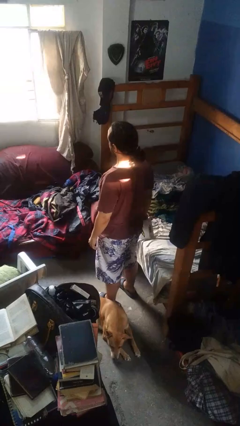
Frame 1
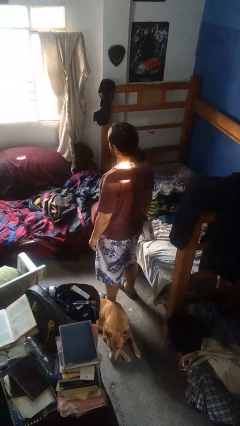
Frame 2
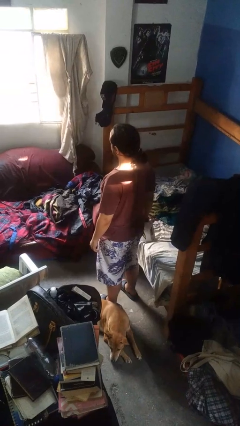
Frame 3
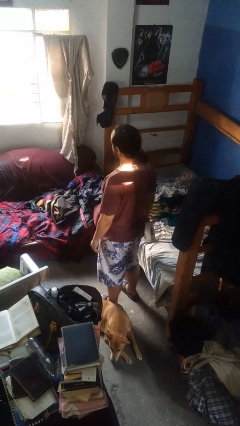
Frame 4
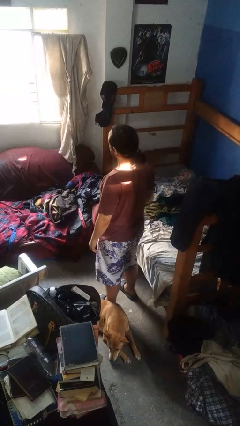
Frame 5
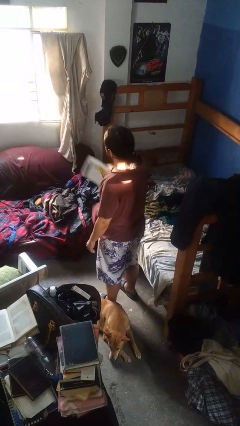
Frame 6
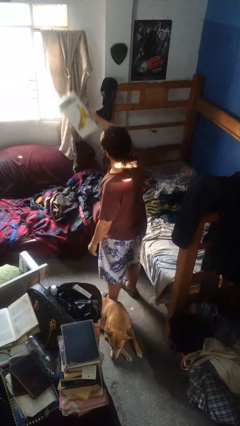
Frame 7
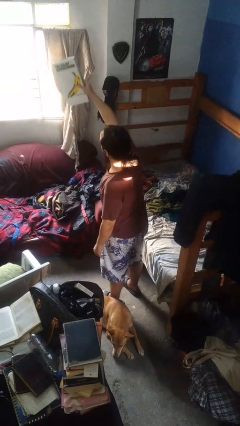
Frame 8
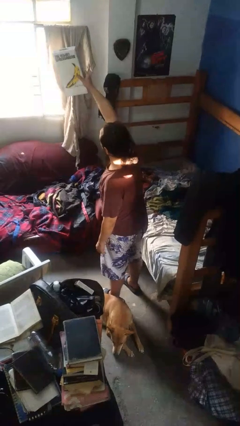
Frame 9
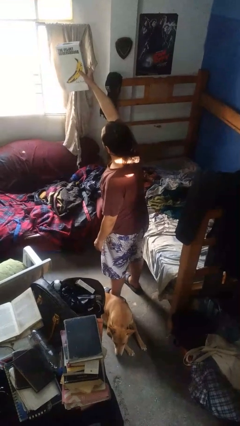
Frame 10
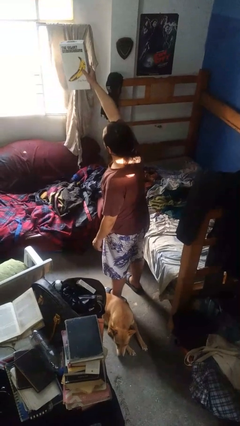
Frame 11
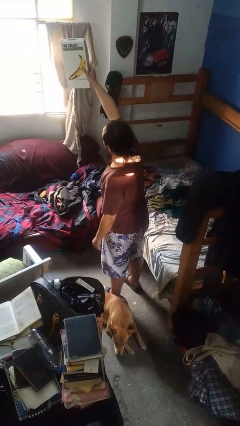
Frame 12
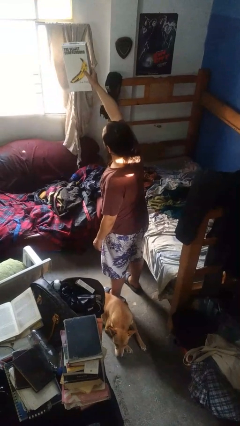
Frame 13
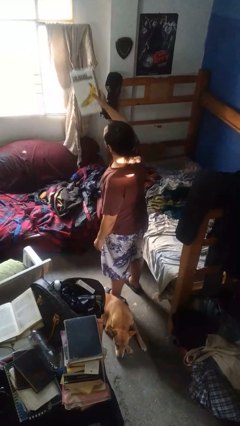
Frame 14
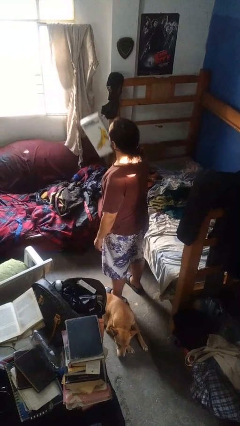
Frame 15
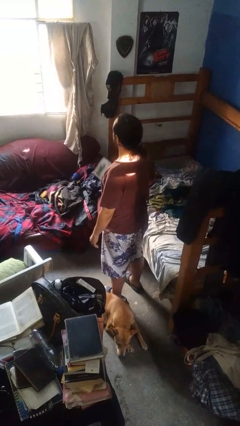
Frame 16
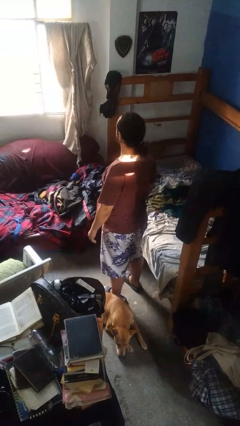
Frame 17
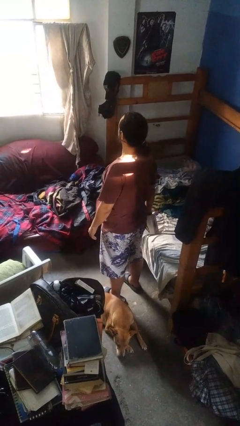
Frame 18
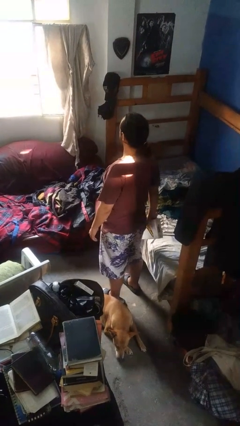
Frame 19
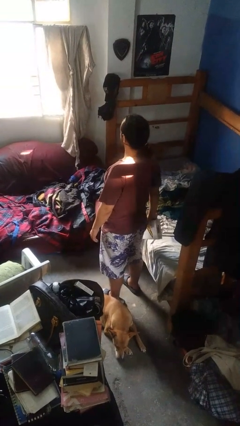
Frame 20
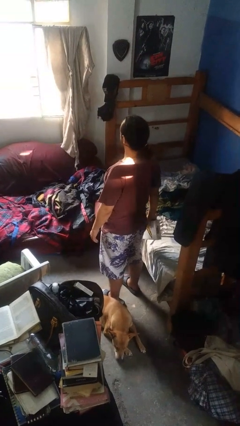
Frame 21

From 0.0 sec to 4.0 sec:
person holds object above head

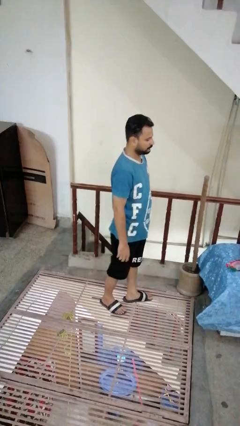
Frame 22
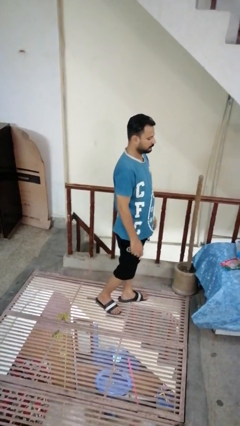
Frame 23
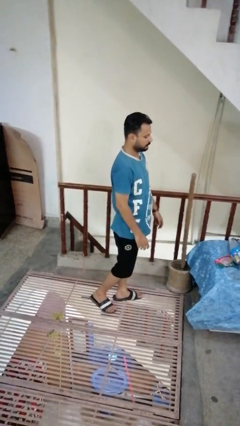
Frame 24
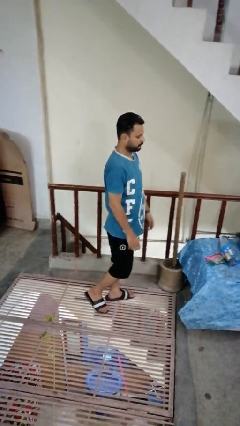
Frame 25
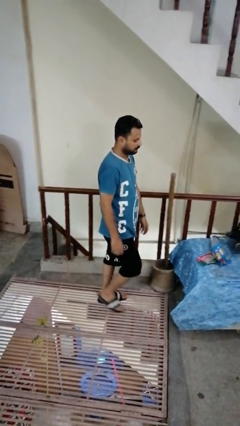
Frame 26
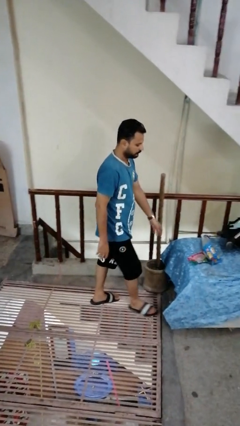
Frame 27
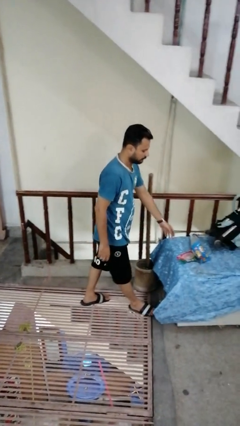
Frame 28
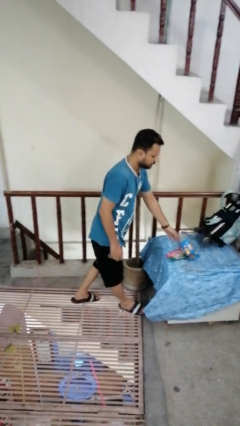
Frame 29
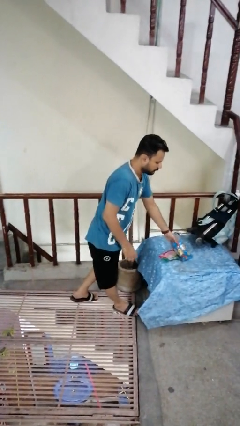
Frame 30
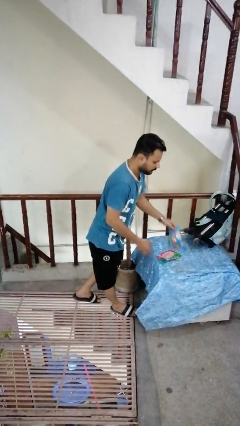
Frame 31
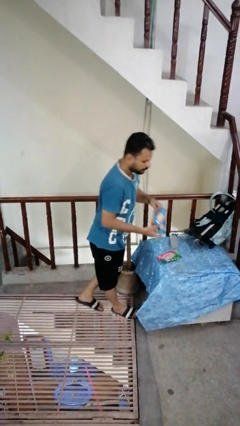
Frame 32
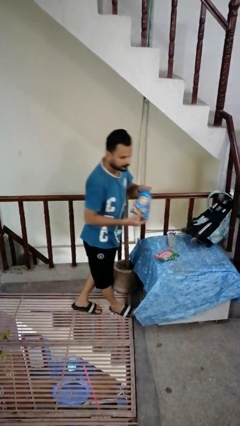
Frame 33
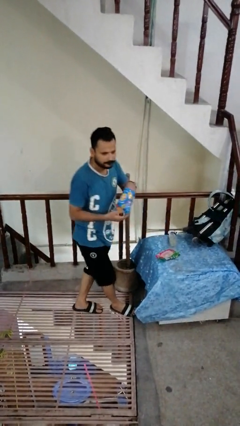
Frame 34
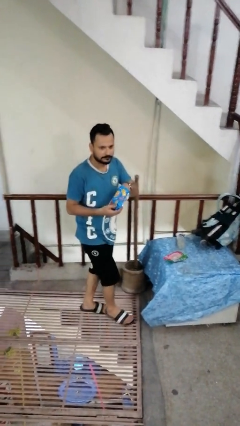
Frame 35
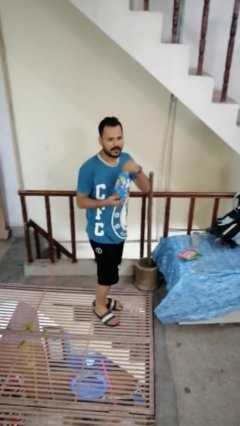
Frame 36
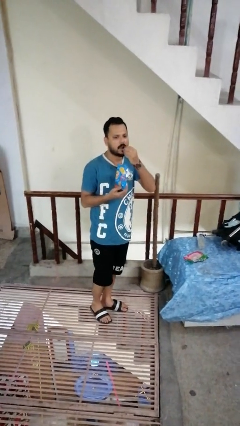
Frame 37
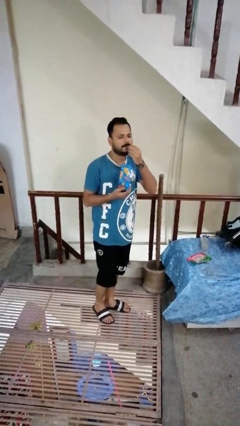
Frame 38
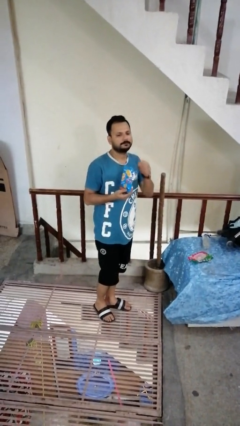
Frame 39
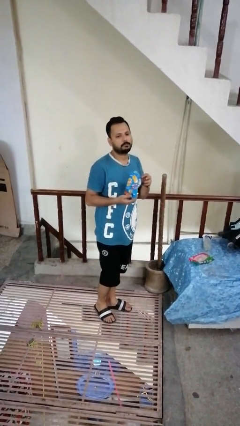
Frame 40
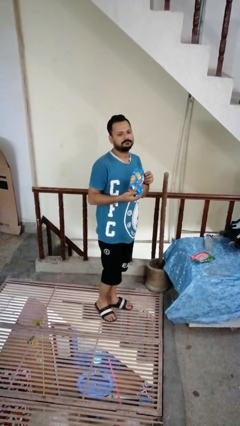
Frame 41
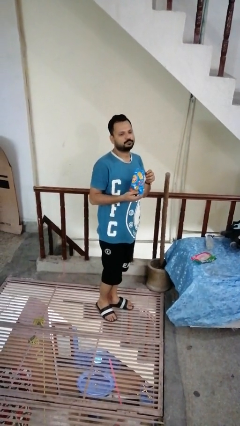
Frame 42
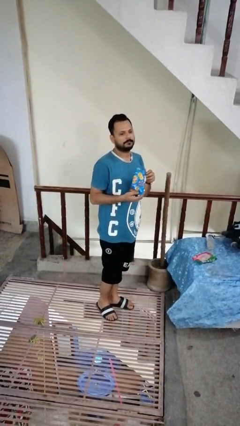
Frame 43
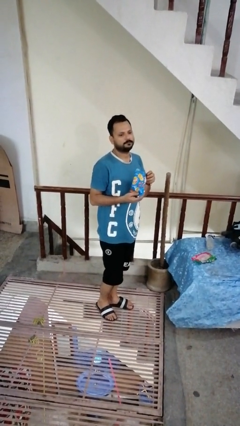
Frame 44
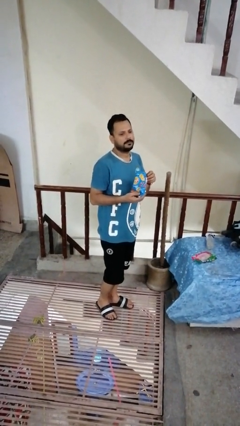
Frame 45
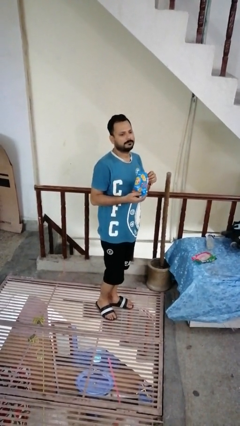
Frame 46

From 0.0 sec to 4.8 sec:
person eats snack from bag

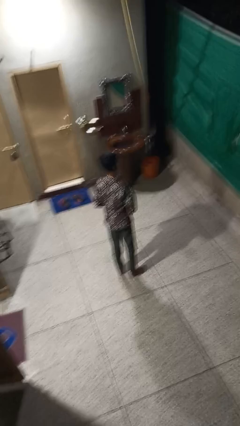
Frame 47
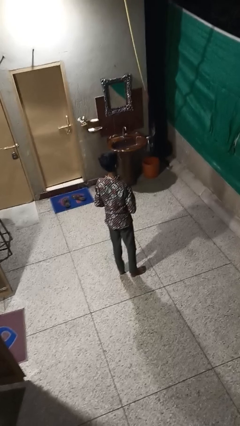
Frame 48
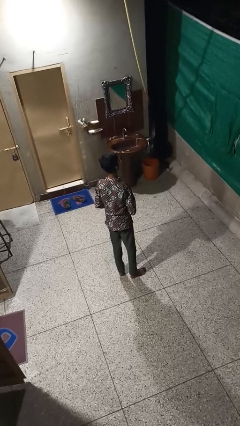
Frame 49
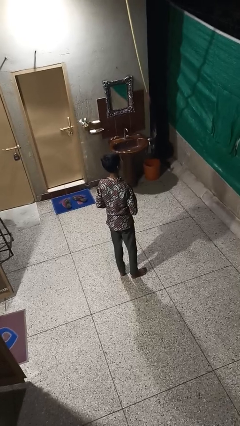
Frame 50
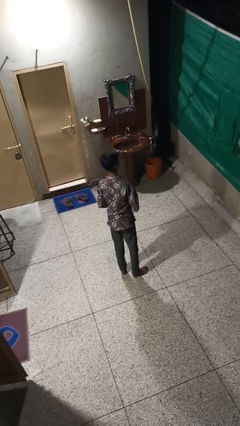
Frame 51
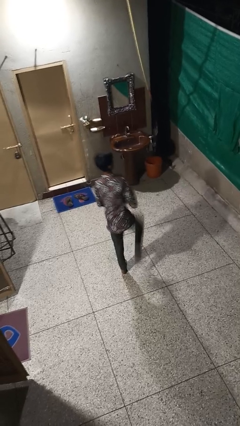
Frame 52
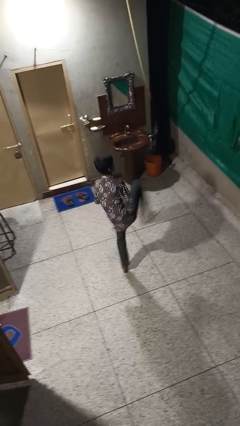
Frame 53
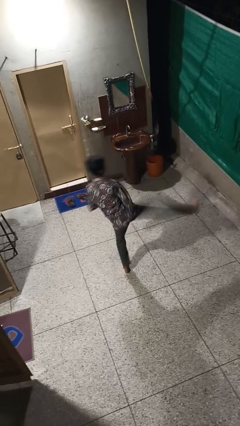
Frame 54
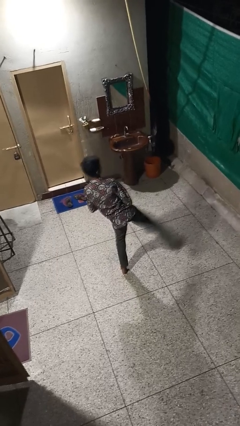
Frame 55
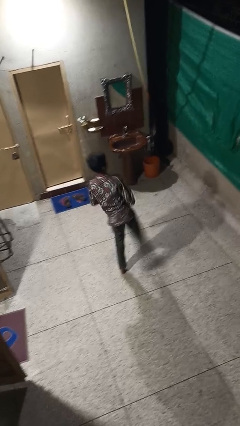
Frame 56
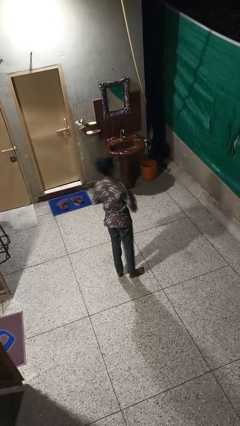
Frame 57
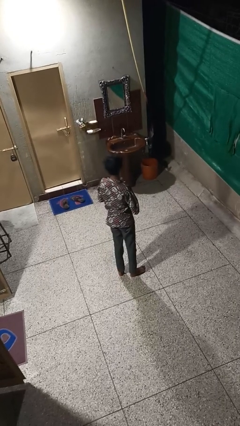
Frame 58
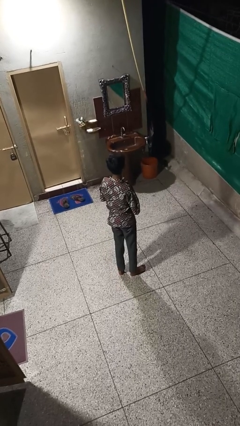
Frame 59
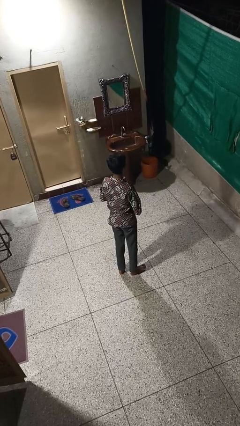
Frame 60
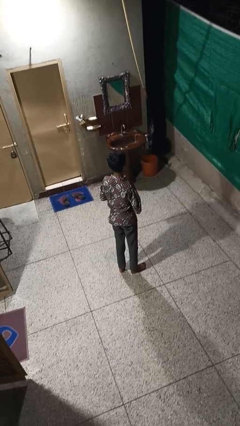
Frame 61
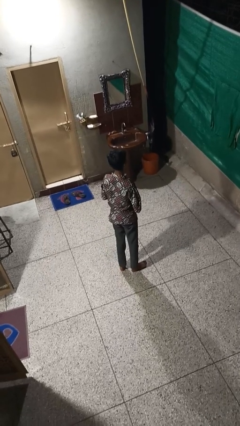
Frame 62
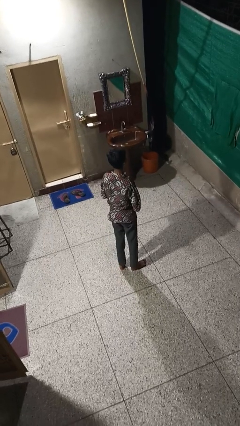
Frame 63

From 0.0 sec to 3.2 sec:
person karate kicks

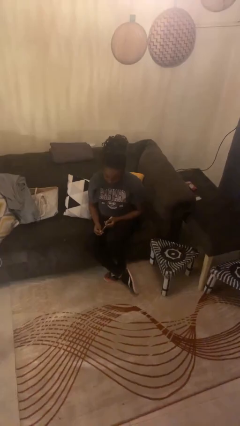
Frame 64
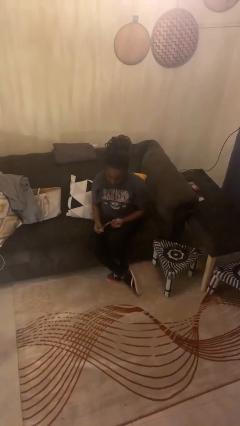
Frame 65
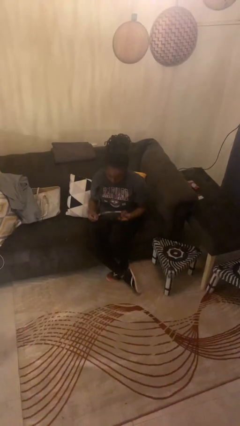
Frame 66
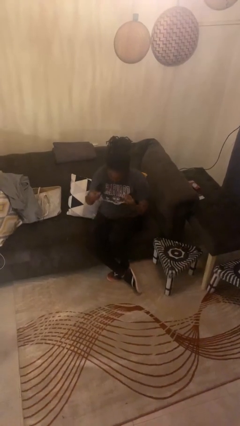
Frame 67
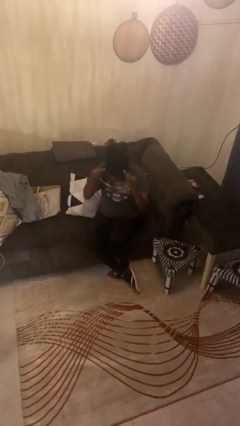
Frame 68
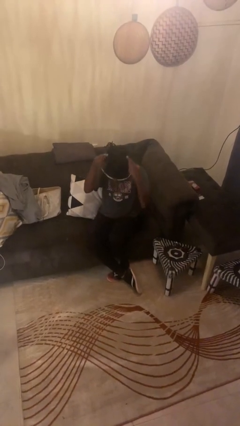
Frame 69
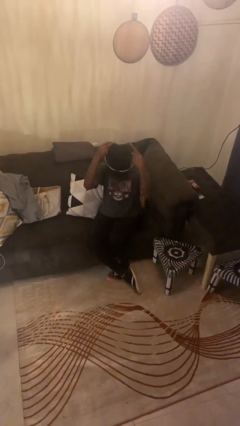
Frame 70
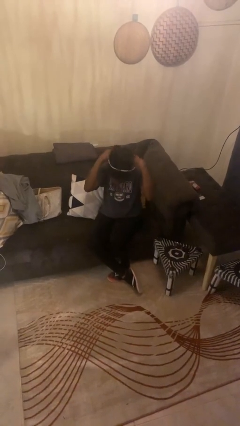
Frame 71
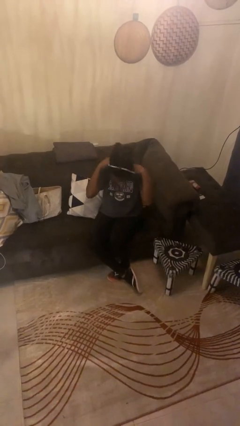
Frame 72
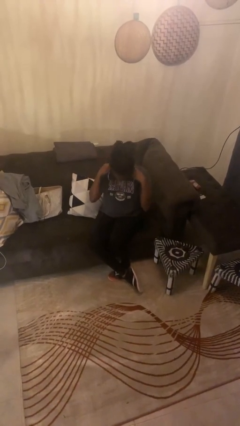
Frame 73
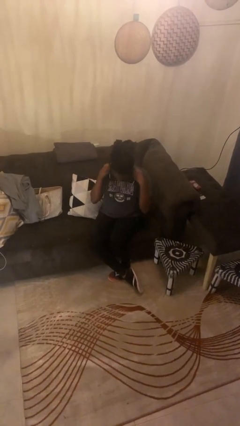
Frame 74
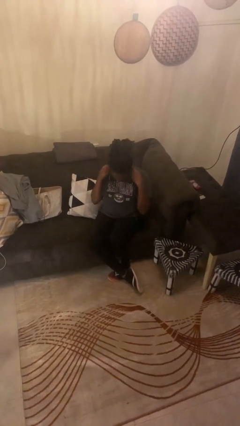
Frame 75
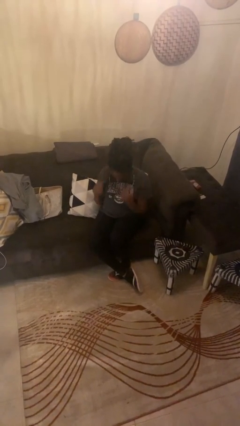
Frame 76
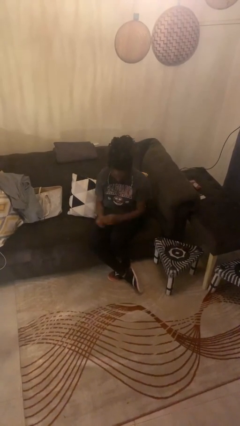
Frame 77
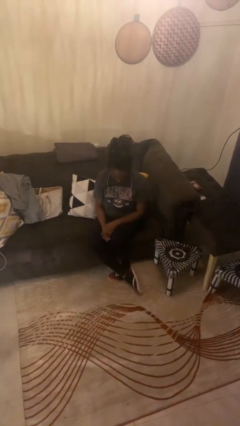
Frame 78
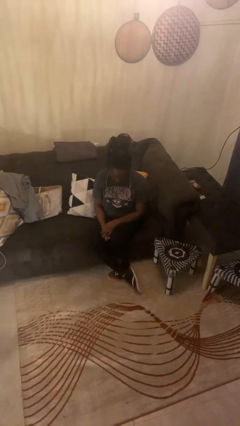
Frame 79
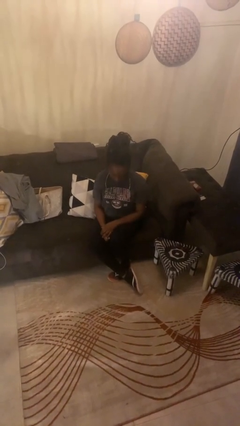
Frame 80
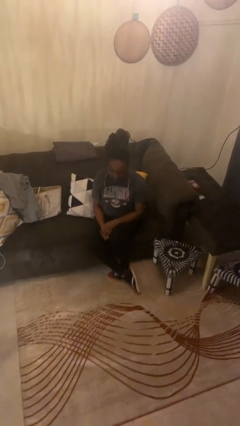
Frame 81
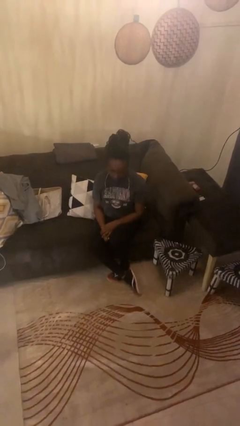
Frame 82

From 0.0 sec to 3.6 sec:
person puts on necklace

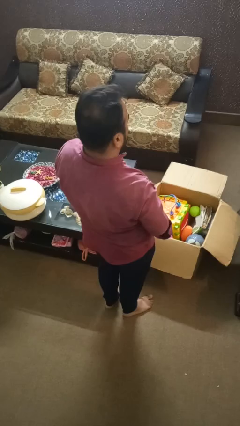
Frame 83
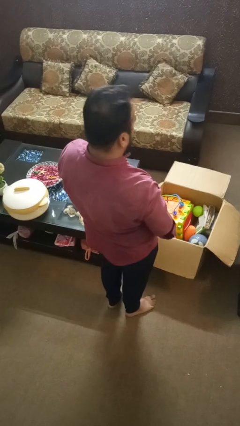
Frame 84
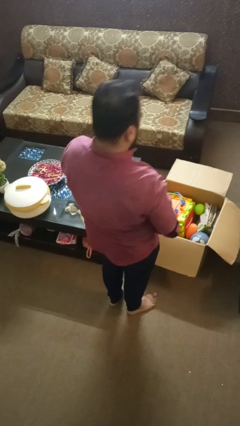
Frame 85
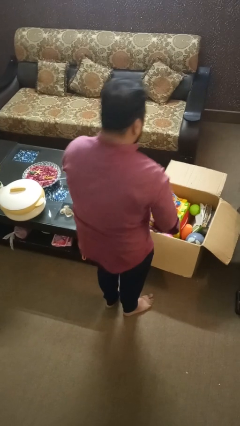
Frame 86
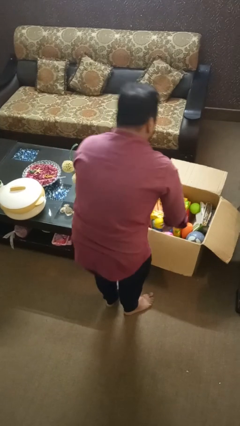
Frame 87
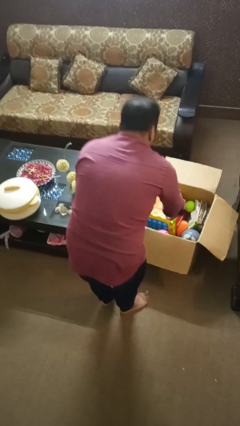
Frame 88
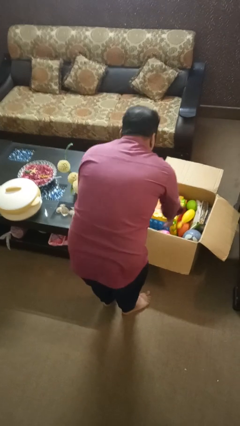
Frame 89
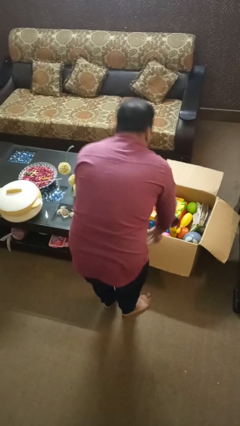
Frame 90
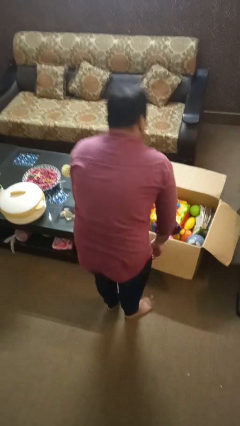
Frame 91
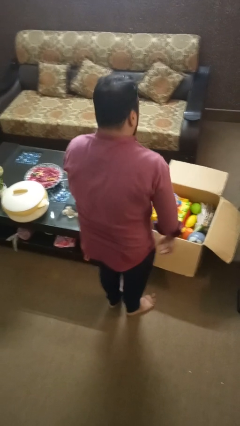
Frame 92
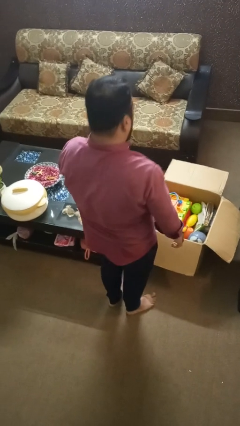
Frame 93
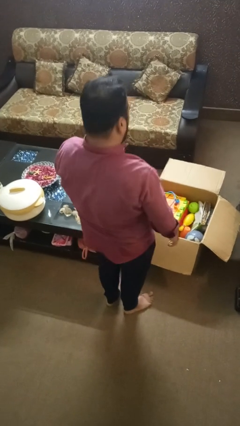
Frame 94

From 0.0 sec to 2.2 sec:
person puts object into box
